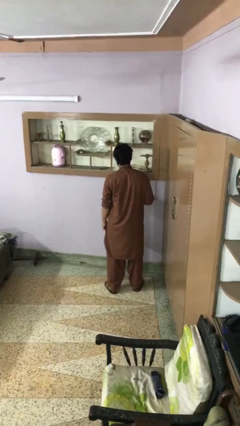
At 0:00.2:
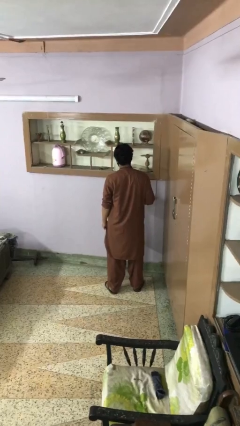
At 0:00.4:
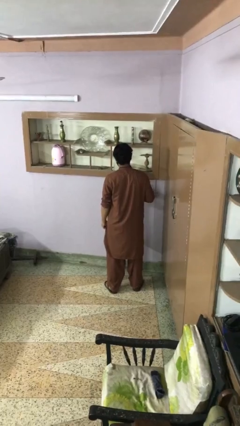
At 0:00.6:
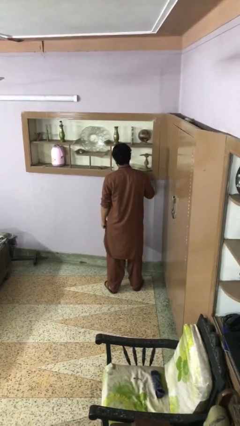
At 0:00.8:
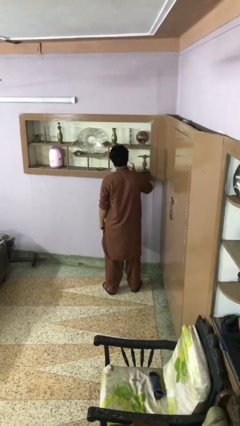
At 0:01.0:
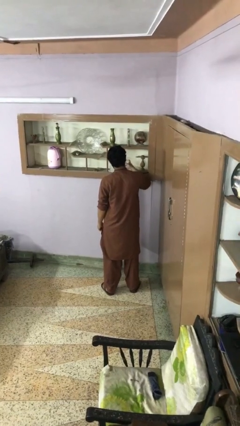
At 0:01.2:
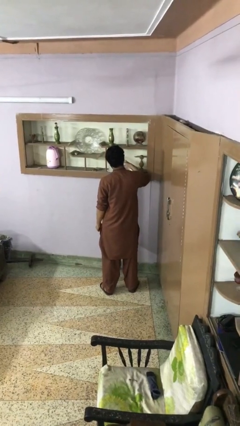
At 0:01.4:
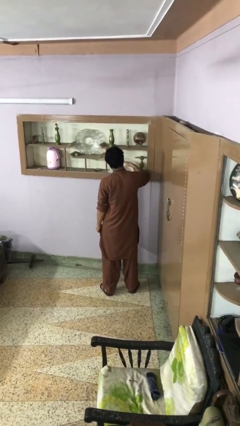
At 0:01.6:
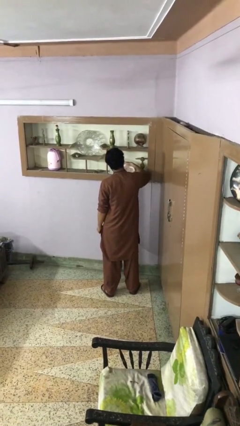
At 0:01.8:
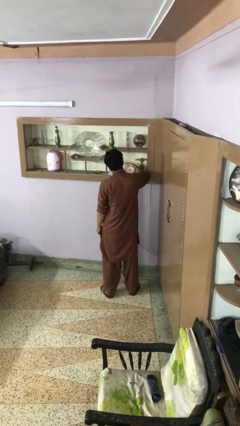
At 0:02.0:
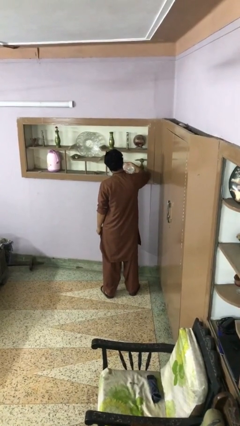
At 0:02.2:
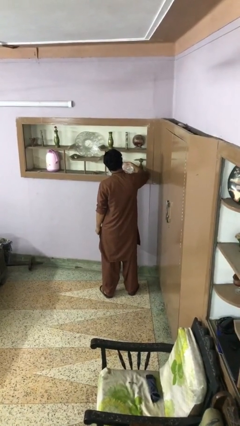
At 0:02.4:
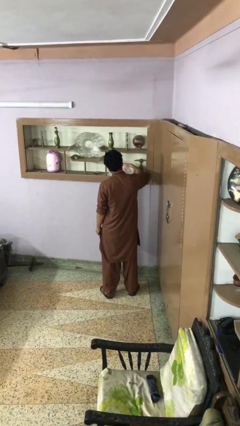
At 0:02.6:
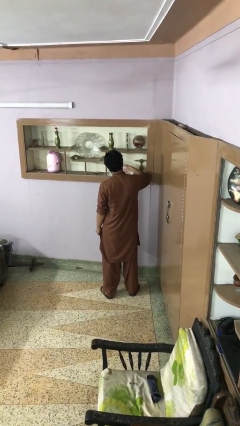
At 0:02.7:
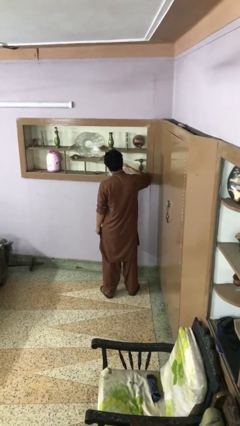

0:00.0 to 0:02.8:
person pours into bowl

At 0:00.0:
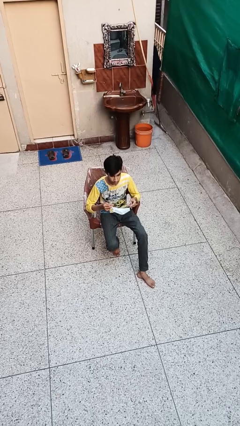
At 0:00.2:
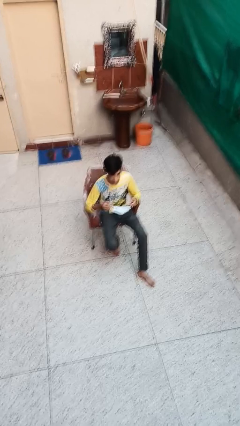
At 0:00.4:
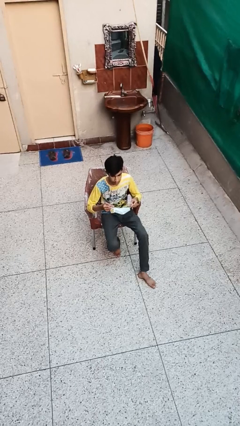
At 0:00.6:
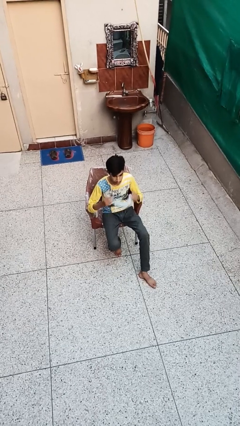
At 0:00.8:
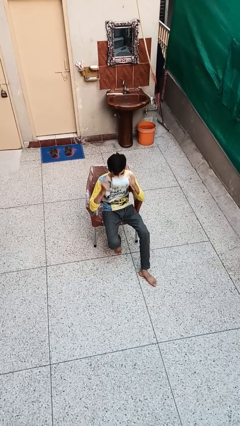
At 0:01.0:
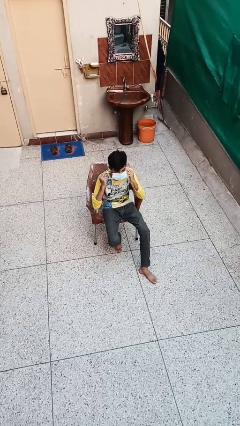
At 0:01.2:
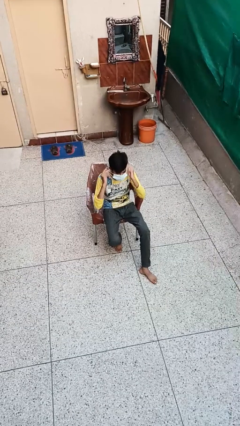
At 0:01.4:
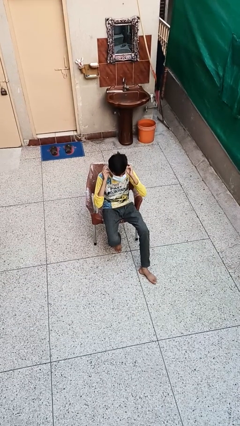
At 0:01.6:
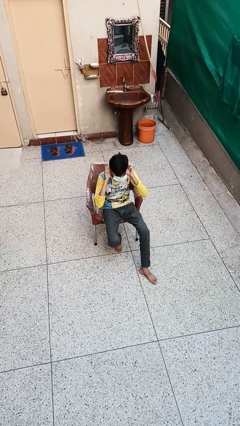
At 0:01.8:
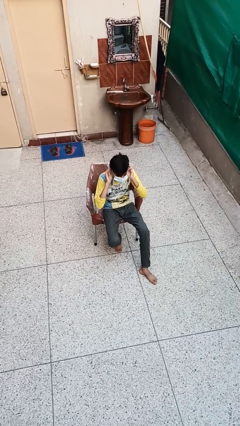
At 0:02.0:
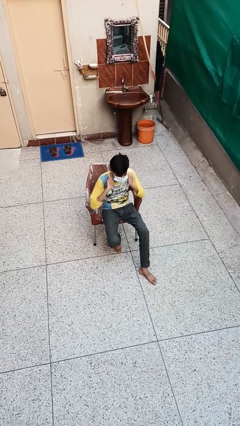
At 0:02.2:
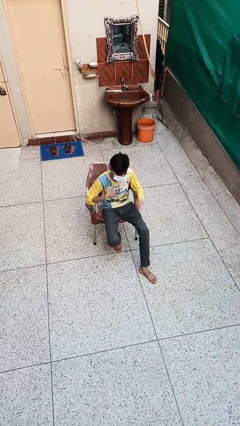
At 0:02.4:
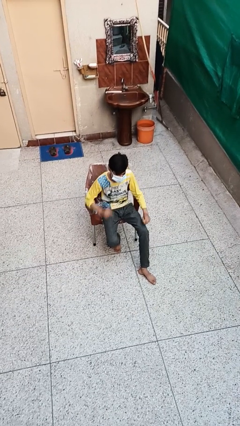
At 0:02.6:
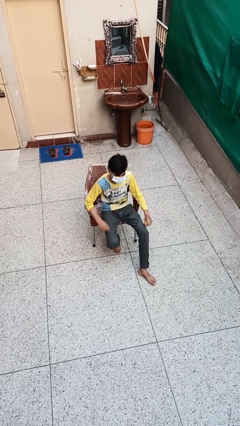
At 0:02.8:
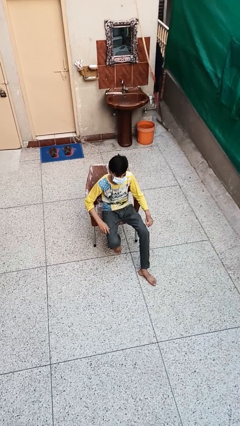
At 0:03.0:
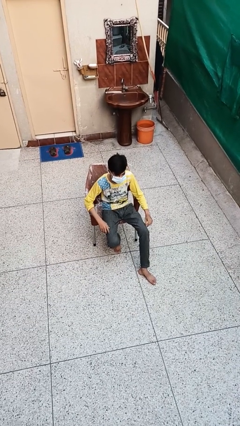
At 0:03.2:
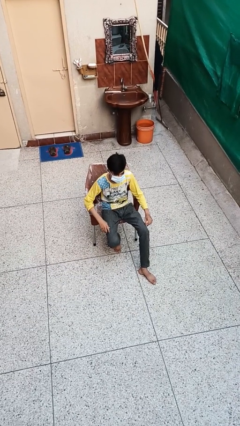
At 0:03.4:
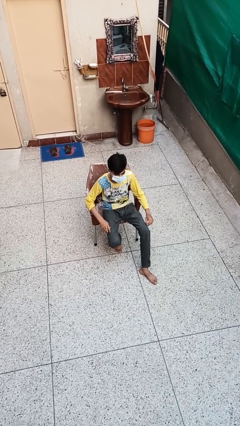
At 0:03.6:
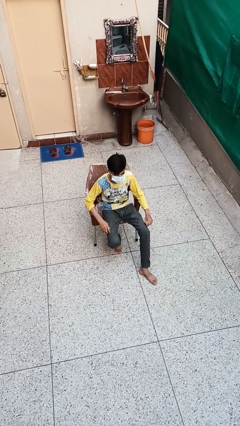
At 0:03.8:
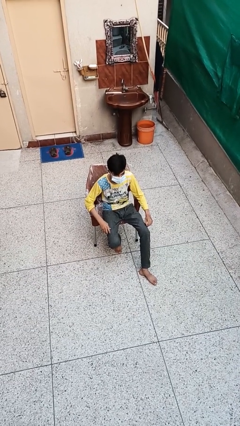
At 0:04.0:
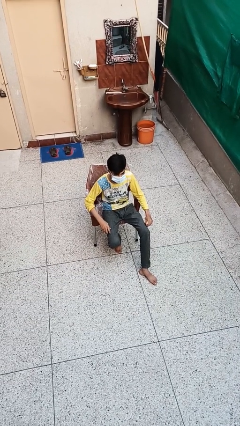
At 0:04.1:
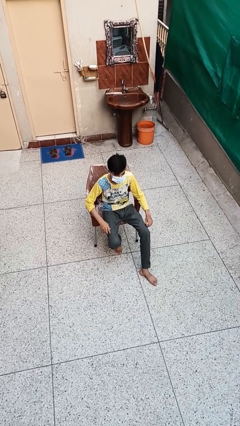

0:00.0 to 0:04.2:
person puts on facemask

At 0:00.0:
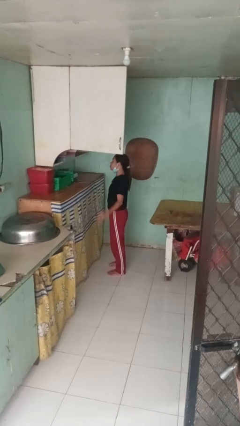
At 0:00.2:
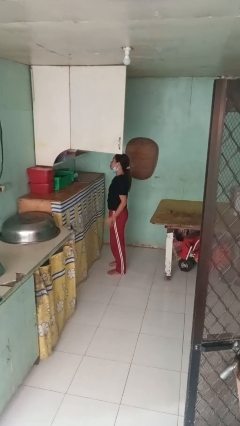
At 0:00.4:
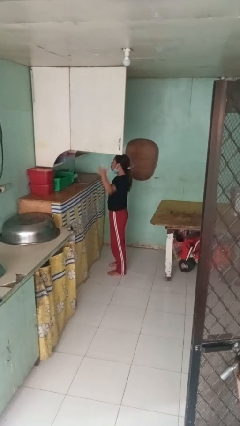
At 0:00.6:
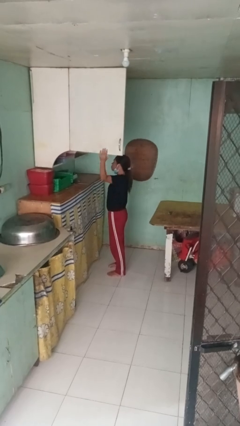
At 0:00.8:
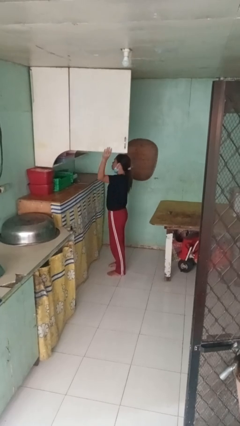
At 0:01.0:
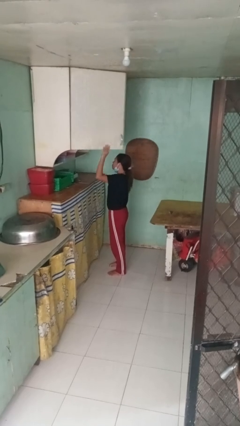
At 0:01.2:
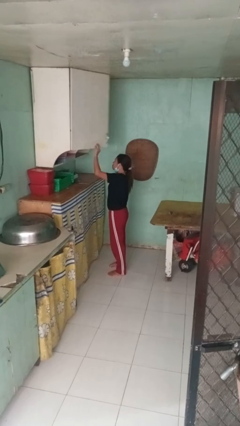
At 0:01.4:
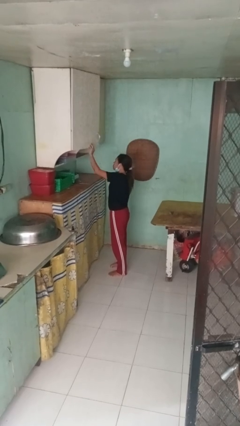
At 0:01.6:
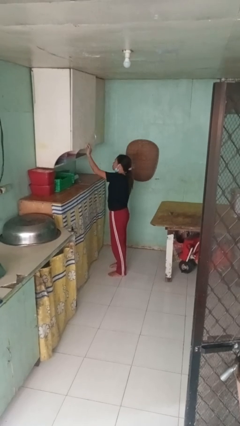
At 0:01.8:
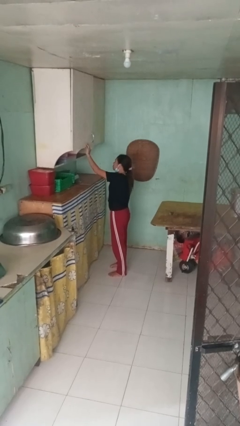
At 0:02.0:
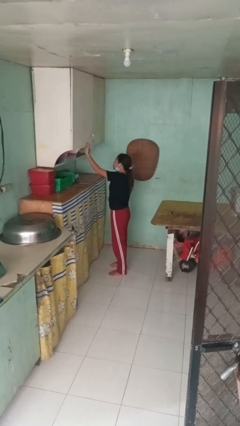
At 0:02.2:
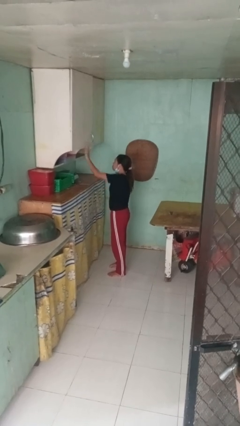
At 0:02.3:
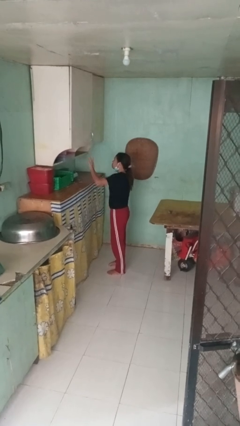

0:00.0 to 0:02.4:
person closes cabinet

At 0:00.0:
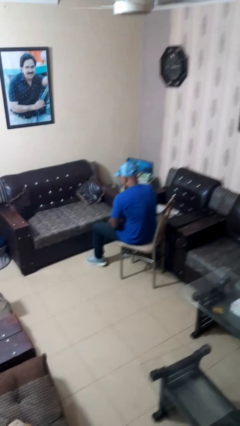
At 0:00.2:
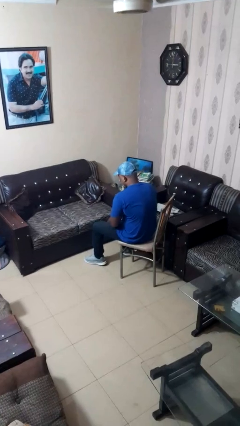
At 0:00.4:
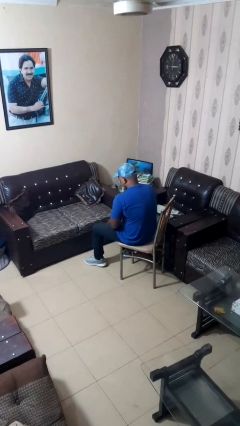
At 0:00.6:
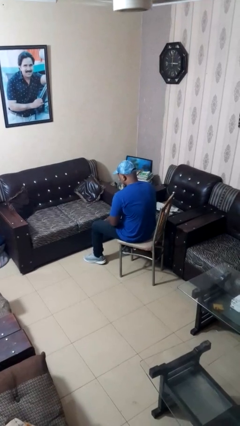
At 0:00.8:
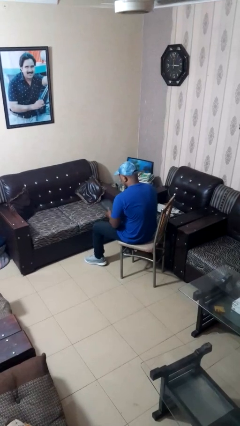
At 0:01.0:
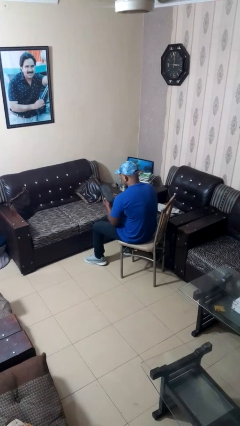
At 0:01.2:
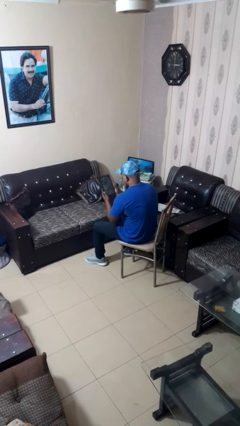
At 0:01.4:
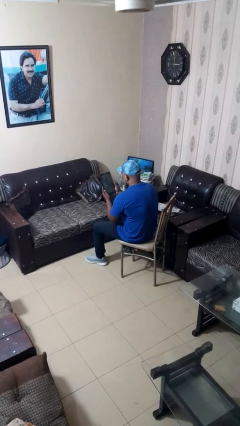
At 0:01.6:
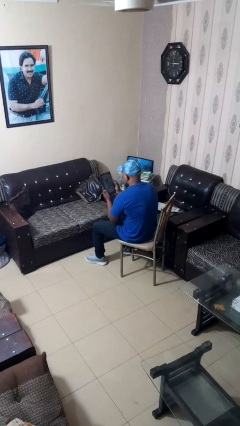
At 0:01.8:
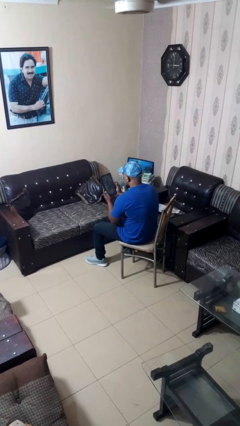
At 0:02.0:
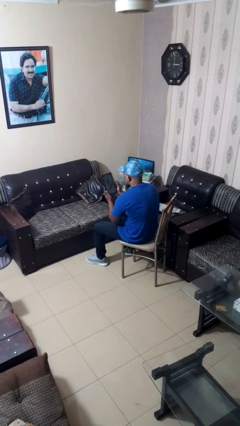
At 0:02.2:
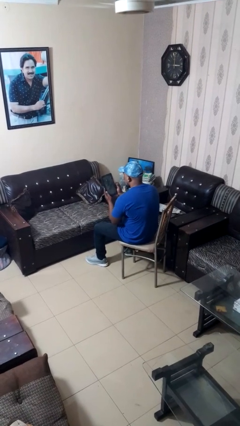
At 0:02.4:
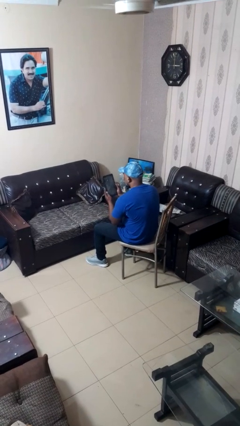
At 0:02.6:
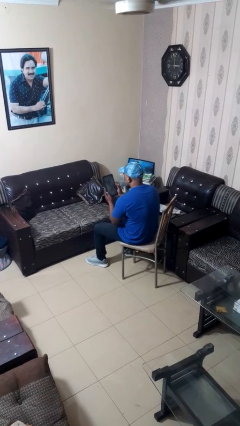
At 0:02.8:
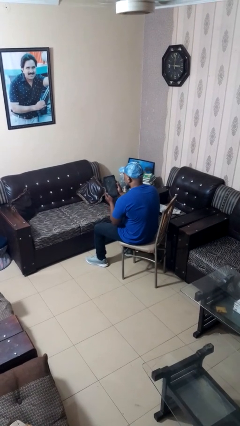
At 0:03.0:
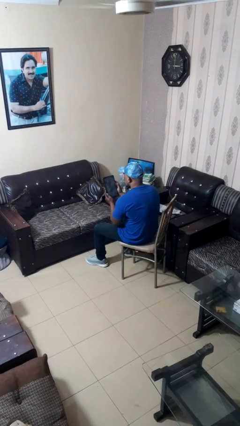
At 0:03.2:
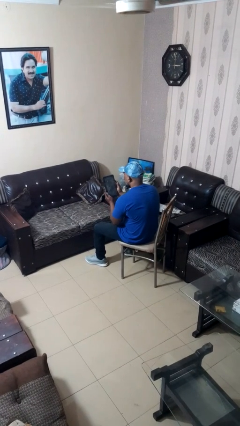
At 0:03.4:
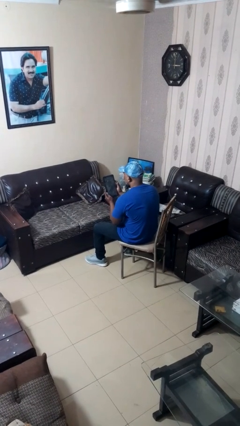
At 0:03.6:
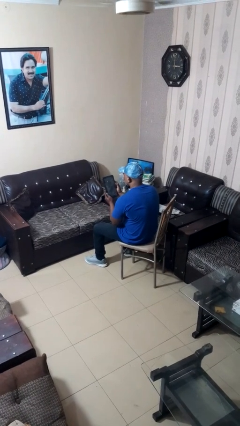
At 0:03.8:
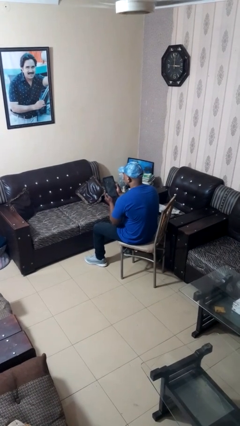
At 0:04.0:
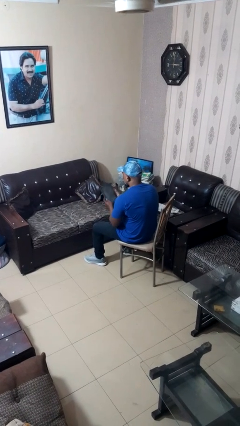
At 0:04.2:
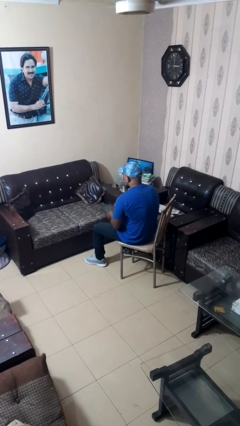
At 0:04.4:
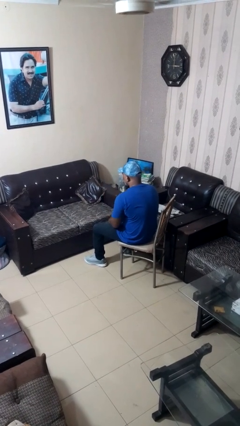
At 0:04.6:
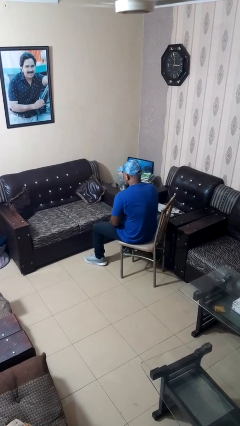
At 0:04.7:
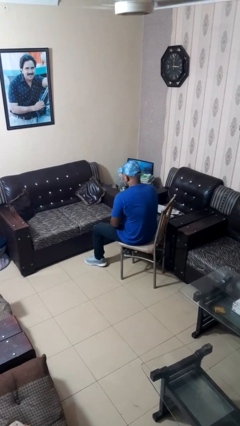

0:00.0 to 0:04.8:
person interacts with tablet

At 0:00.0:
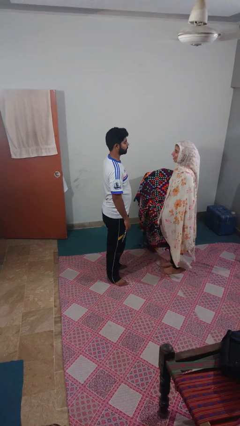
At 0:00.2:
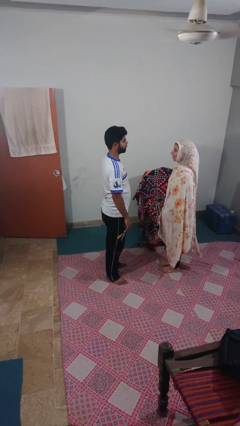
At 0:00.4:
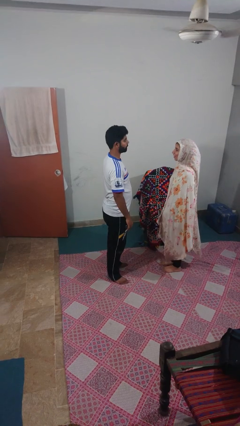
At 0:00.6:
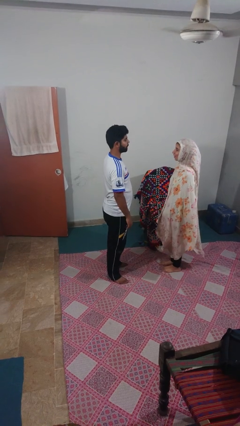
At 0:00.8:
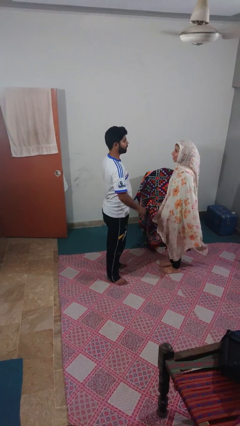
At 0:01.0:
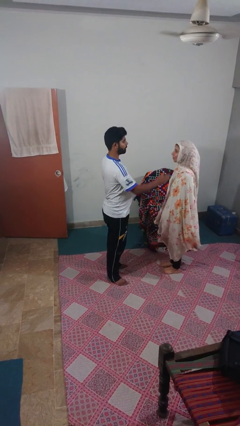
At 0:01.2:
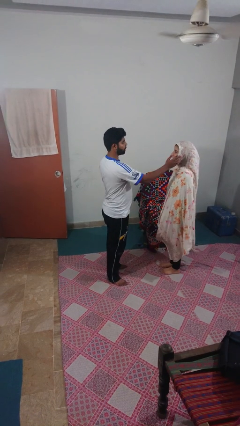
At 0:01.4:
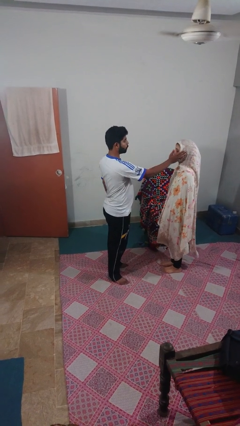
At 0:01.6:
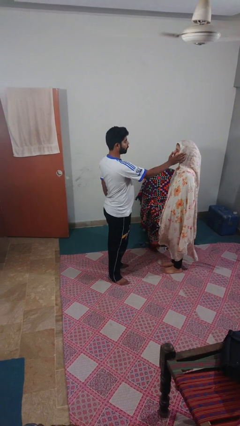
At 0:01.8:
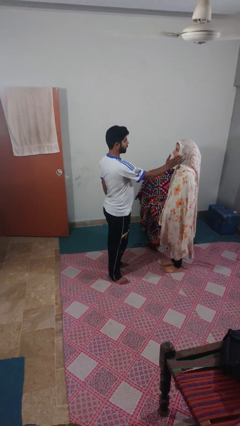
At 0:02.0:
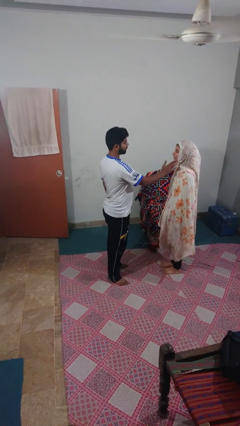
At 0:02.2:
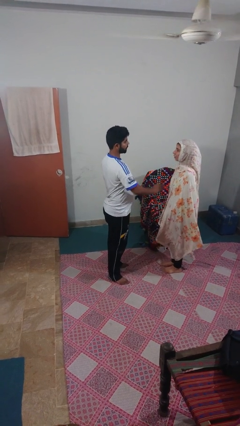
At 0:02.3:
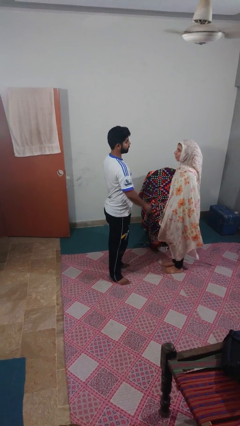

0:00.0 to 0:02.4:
person touches face of person

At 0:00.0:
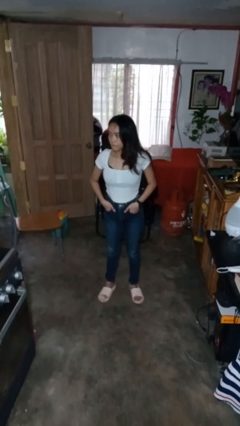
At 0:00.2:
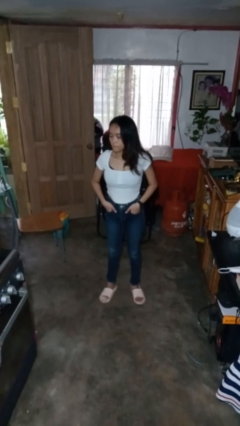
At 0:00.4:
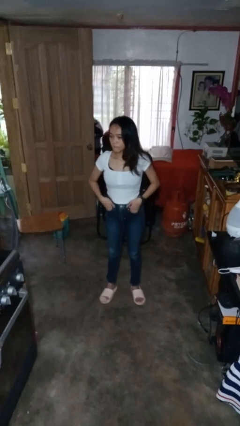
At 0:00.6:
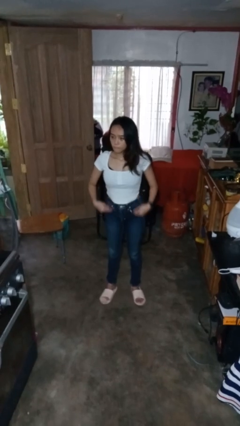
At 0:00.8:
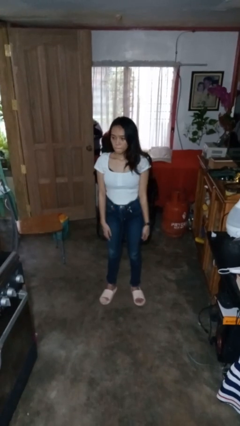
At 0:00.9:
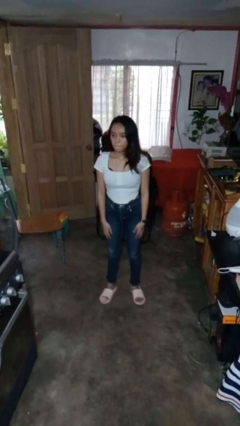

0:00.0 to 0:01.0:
person puts hands in back pockets
